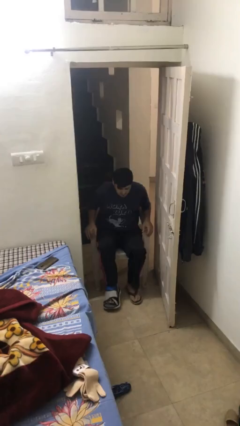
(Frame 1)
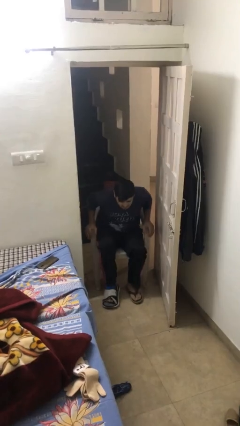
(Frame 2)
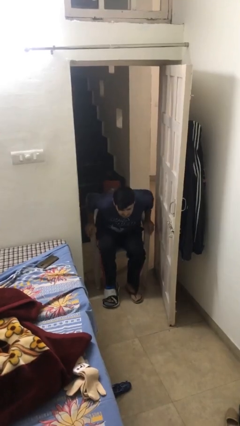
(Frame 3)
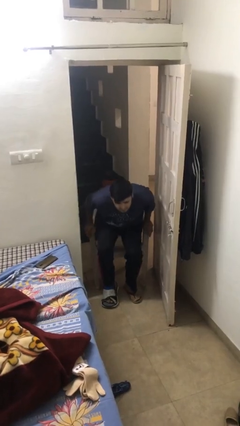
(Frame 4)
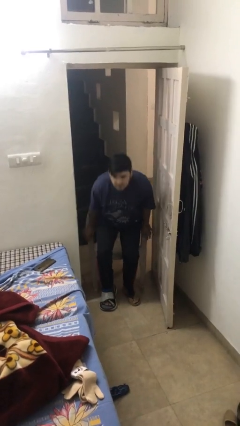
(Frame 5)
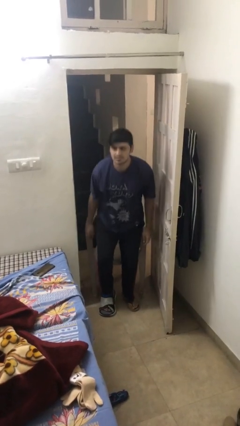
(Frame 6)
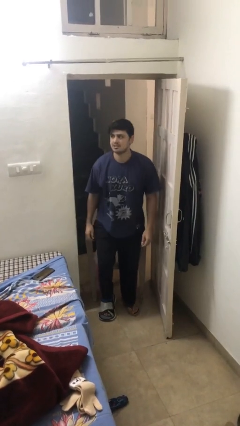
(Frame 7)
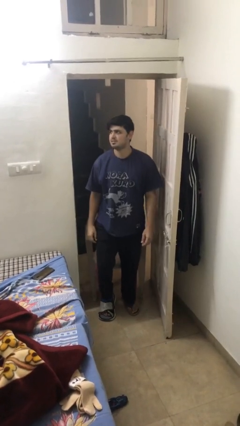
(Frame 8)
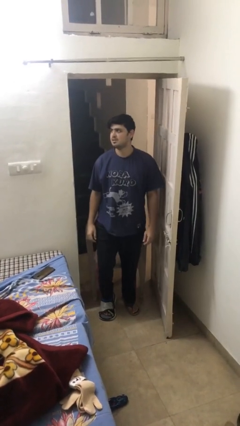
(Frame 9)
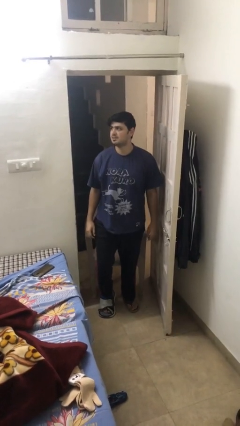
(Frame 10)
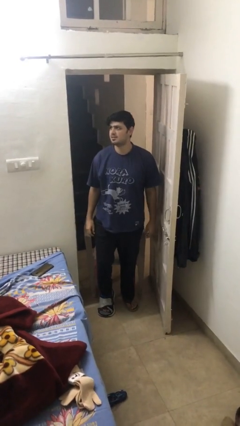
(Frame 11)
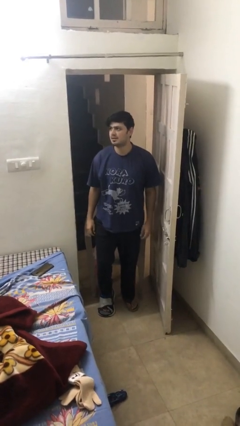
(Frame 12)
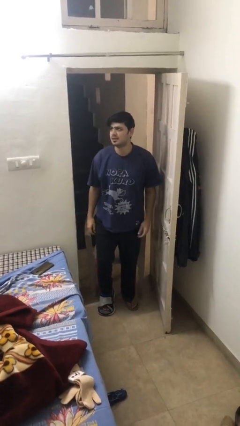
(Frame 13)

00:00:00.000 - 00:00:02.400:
person stands up

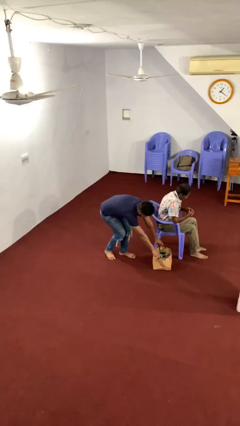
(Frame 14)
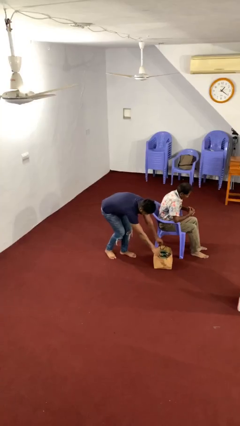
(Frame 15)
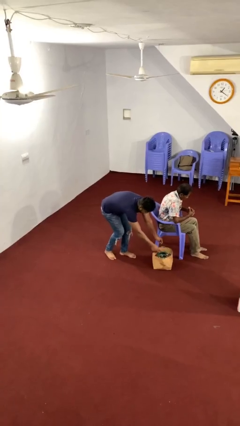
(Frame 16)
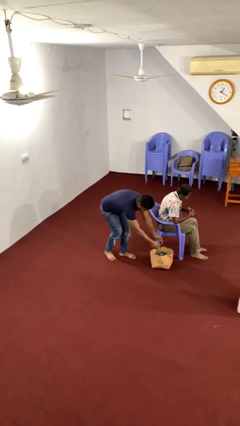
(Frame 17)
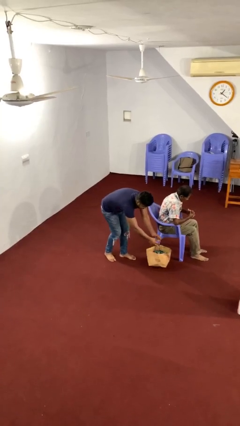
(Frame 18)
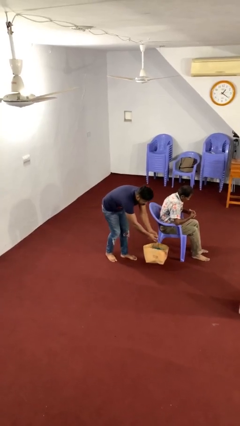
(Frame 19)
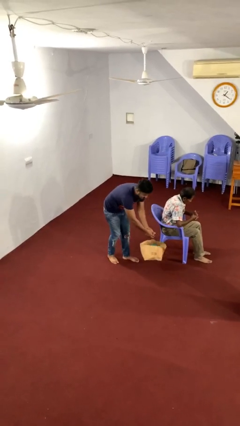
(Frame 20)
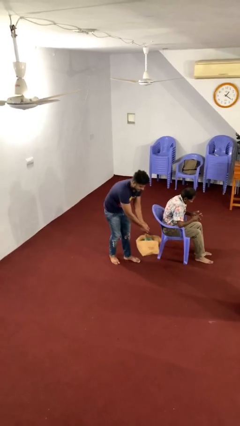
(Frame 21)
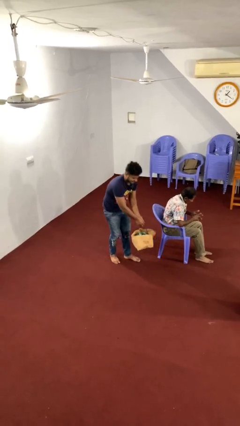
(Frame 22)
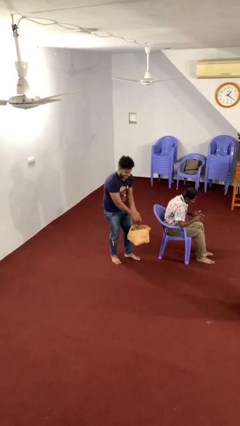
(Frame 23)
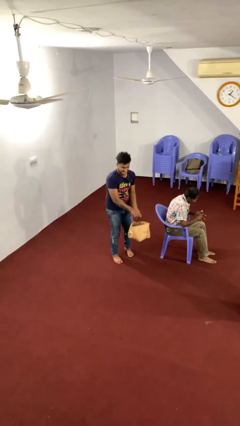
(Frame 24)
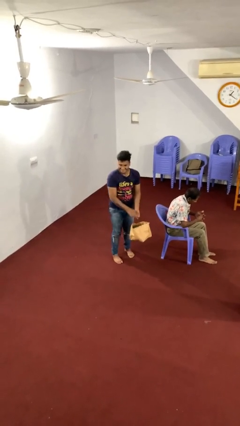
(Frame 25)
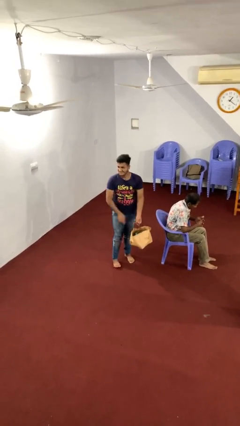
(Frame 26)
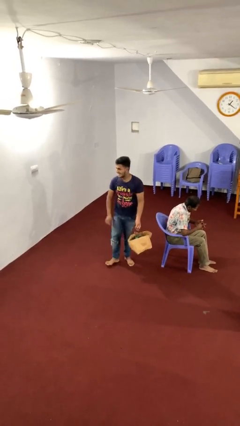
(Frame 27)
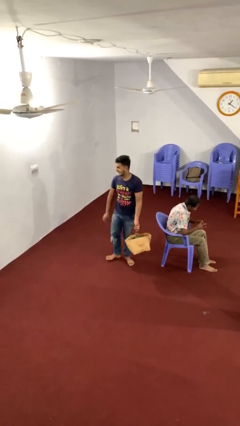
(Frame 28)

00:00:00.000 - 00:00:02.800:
person steals object from person

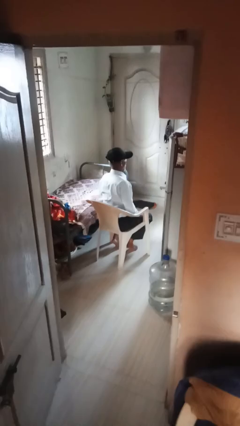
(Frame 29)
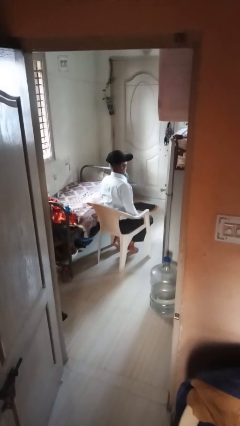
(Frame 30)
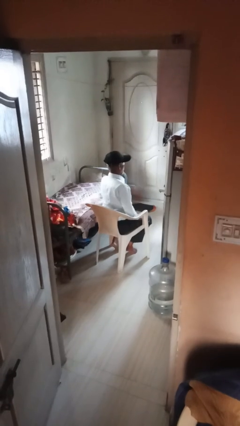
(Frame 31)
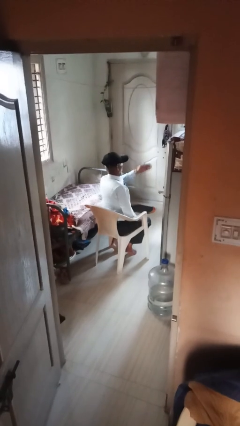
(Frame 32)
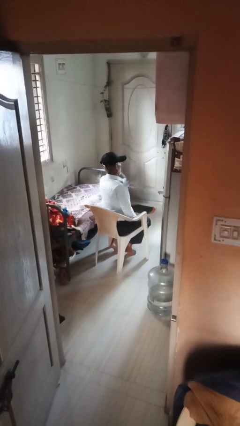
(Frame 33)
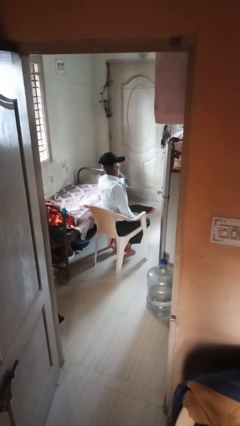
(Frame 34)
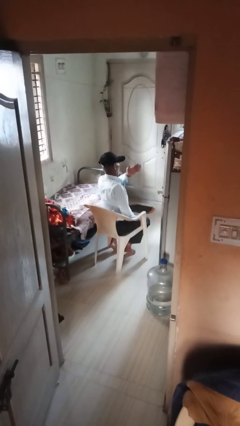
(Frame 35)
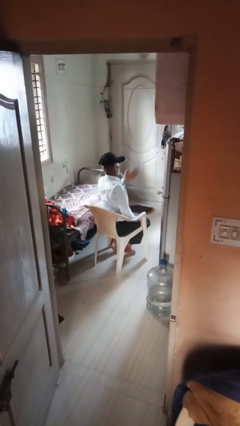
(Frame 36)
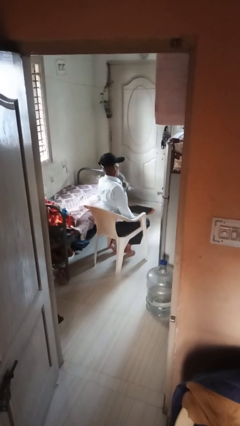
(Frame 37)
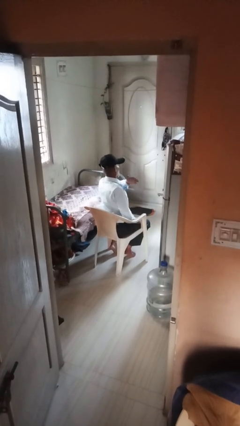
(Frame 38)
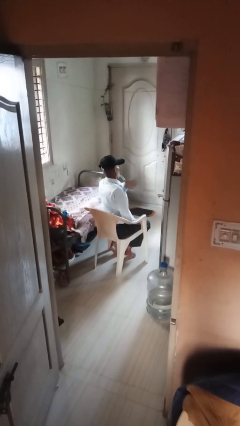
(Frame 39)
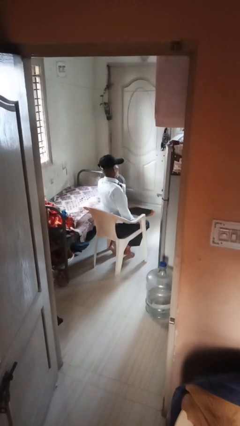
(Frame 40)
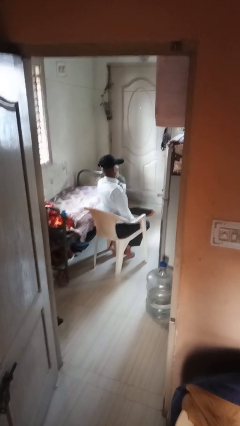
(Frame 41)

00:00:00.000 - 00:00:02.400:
person drums on chest

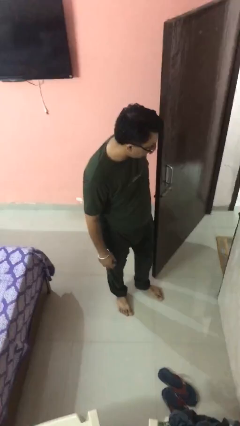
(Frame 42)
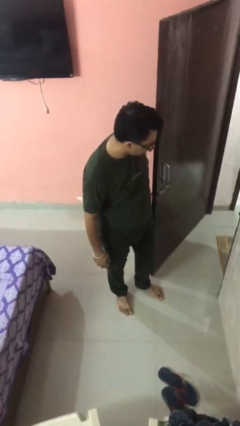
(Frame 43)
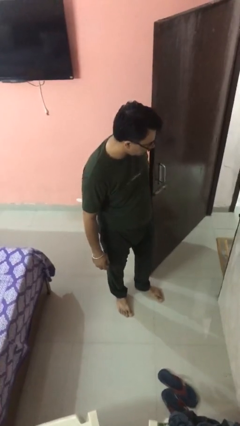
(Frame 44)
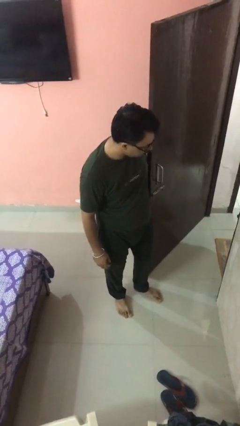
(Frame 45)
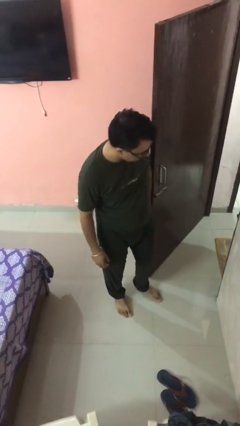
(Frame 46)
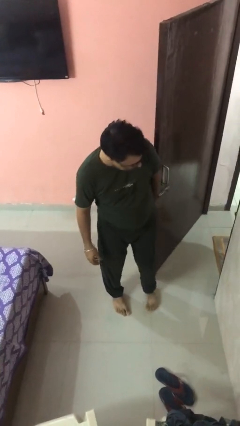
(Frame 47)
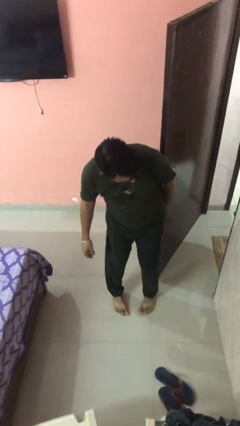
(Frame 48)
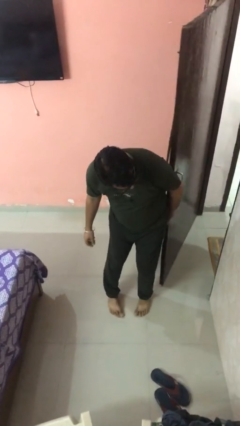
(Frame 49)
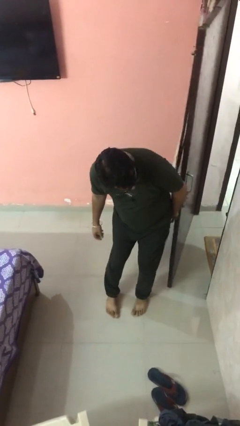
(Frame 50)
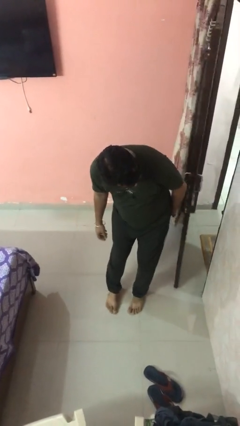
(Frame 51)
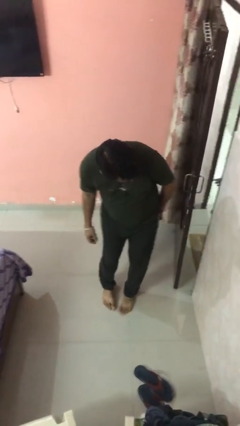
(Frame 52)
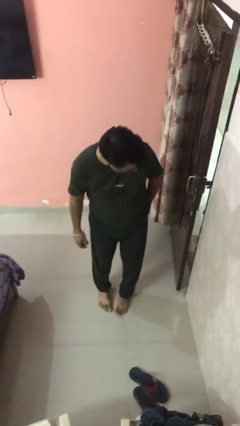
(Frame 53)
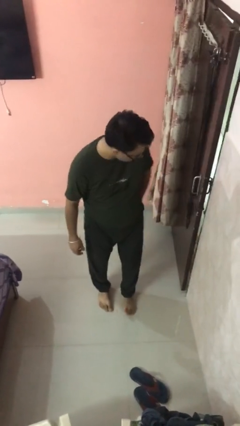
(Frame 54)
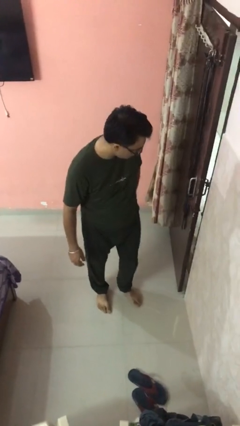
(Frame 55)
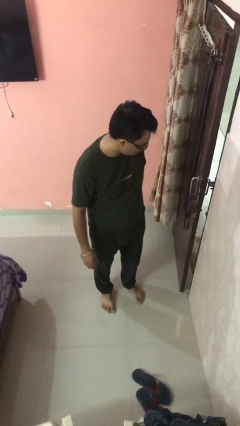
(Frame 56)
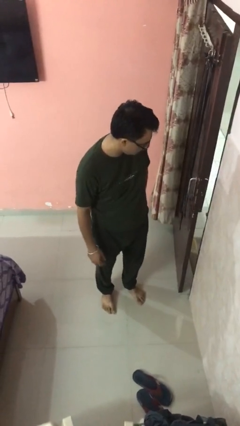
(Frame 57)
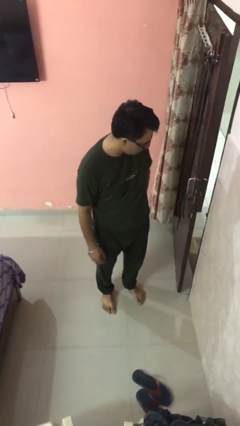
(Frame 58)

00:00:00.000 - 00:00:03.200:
person closes door with hip

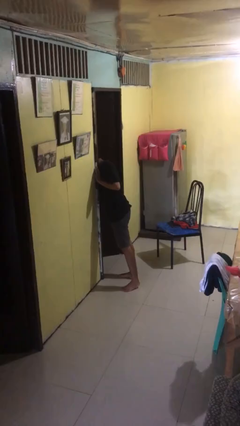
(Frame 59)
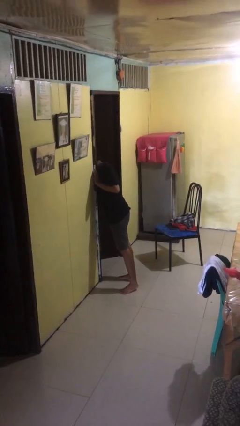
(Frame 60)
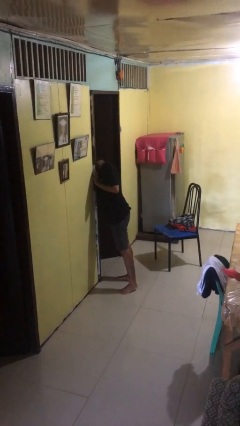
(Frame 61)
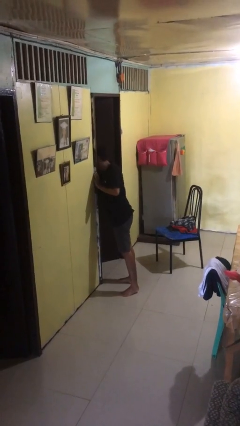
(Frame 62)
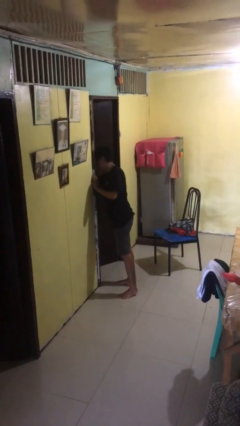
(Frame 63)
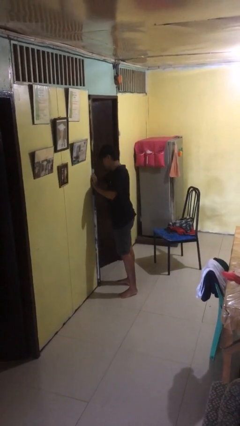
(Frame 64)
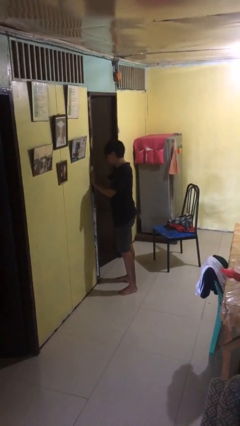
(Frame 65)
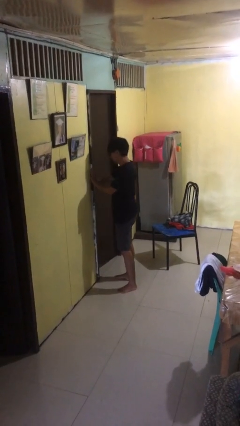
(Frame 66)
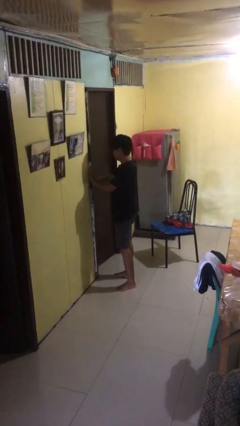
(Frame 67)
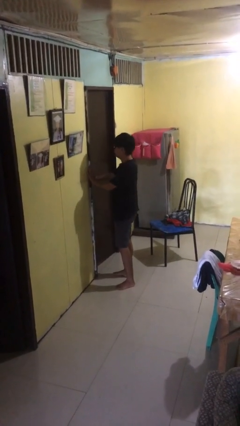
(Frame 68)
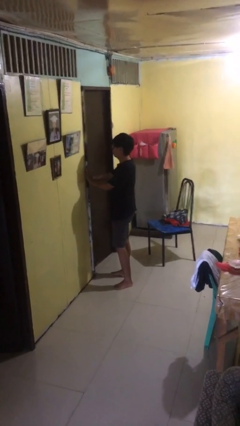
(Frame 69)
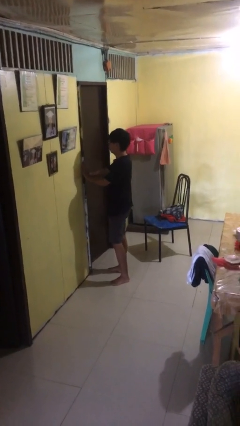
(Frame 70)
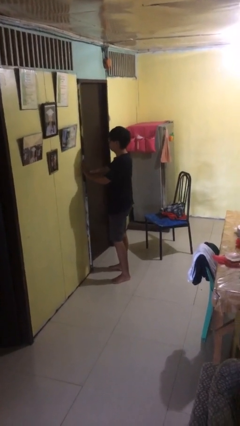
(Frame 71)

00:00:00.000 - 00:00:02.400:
person closes facility door

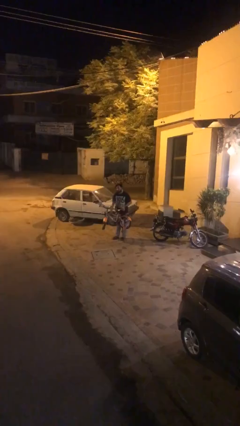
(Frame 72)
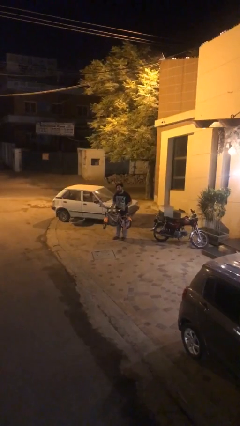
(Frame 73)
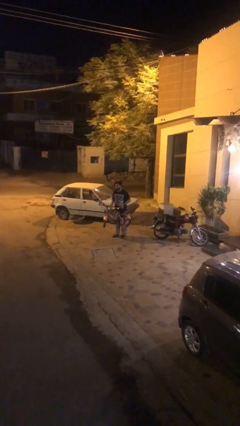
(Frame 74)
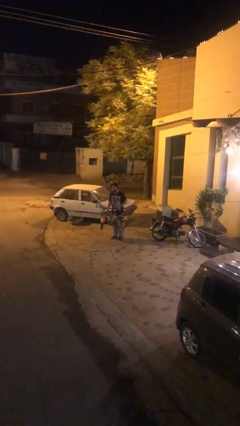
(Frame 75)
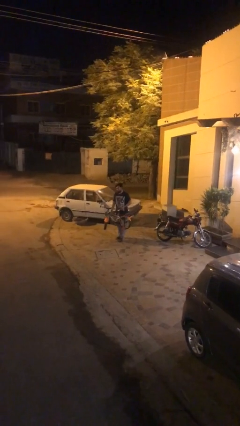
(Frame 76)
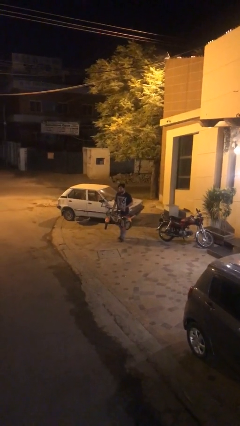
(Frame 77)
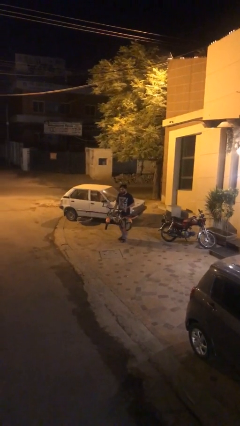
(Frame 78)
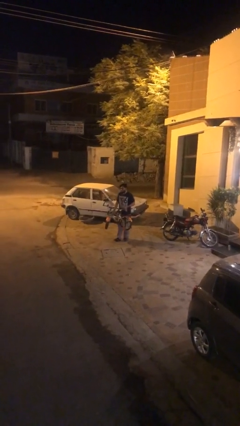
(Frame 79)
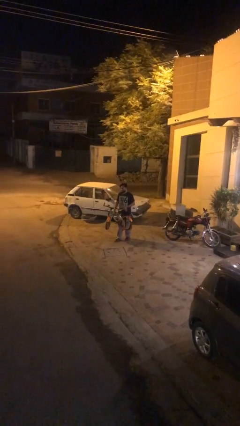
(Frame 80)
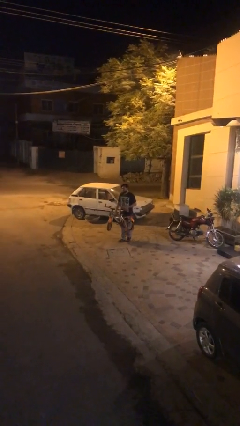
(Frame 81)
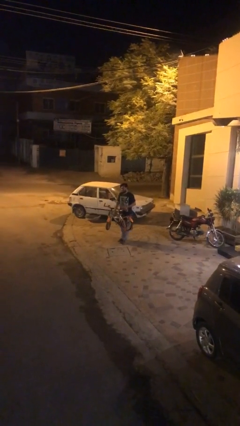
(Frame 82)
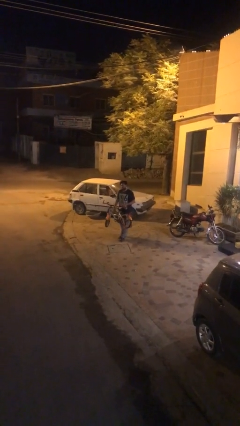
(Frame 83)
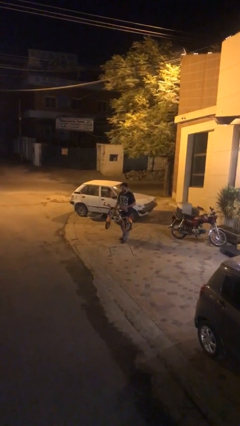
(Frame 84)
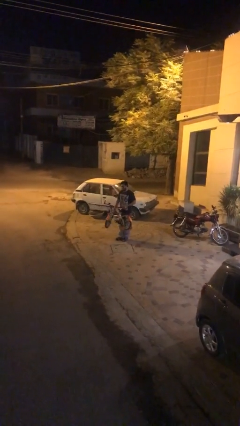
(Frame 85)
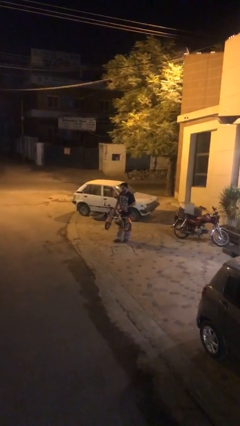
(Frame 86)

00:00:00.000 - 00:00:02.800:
person carries heavy object

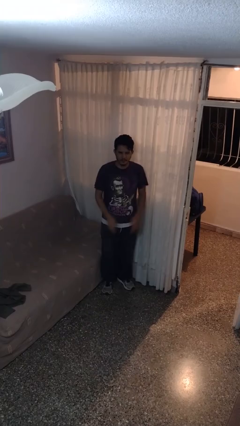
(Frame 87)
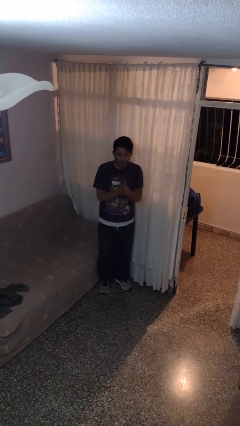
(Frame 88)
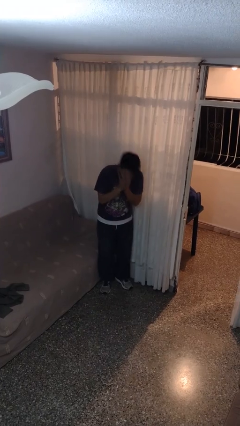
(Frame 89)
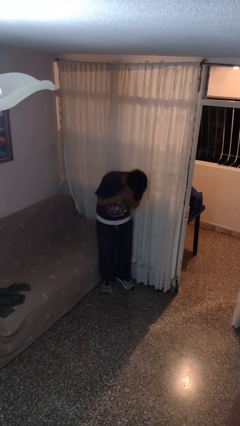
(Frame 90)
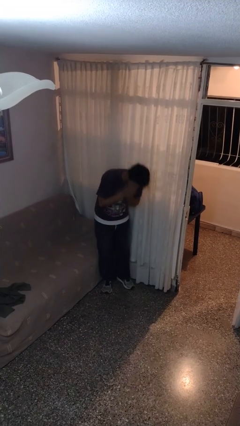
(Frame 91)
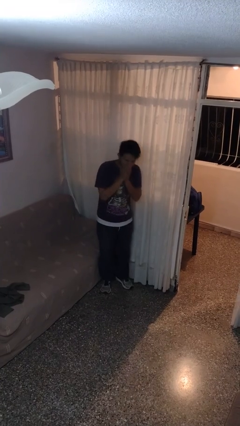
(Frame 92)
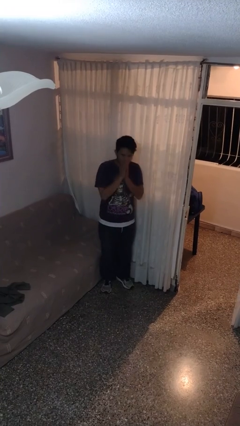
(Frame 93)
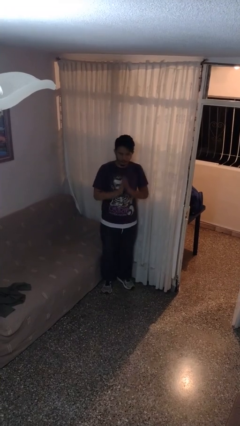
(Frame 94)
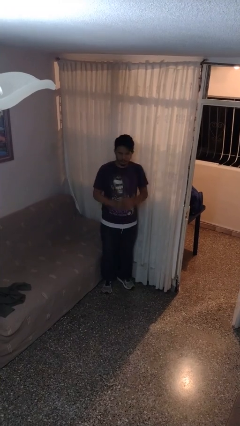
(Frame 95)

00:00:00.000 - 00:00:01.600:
person sneezes into hand
